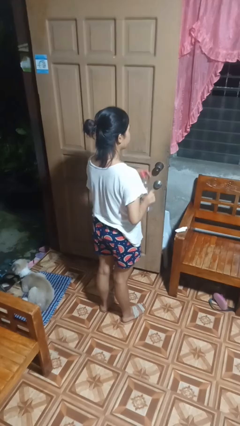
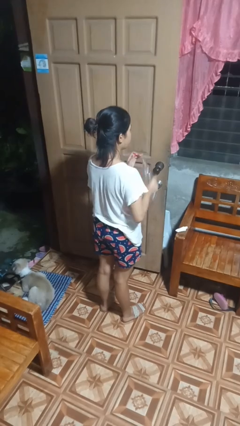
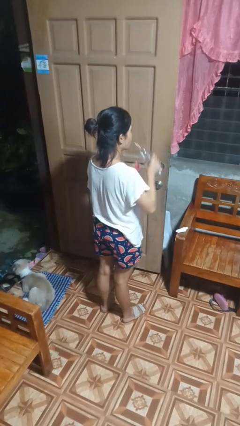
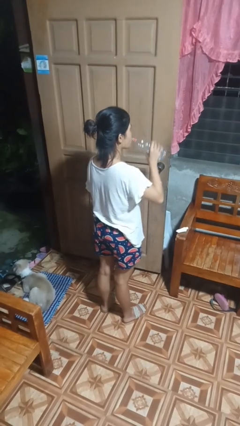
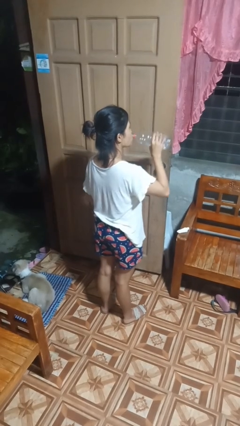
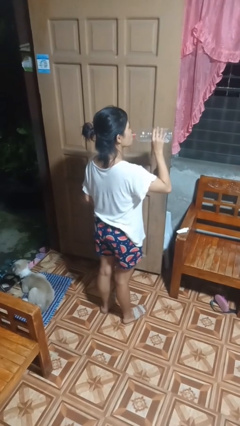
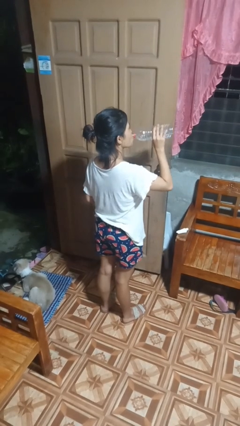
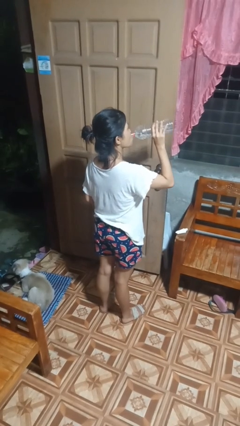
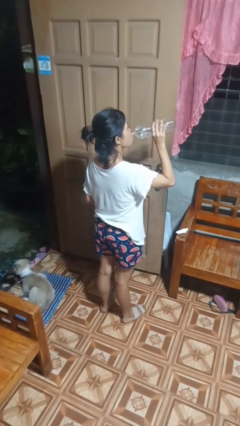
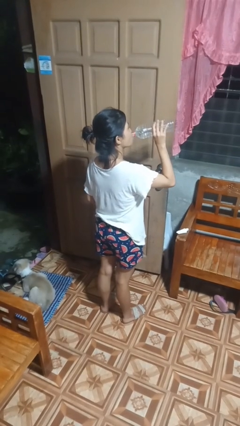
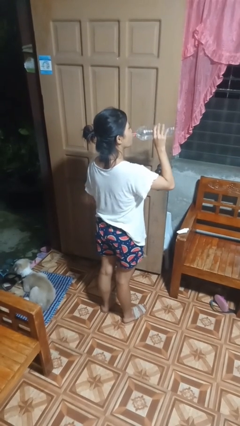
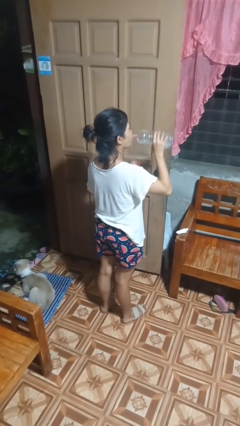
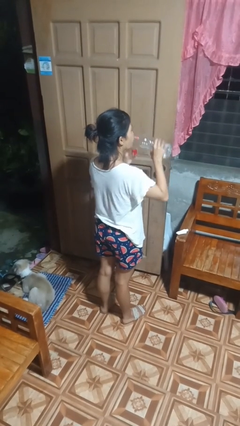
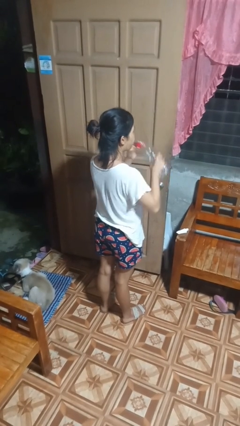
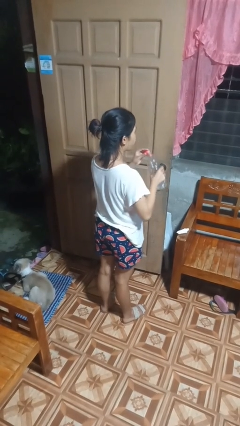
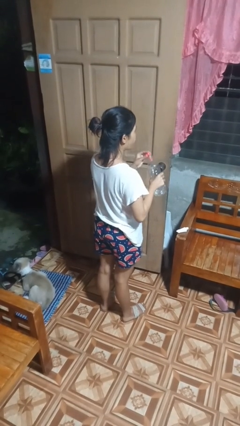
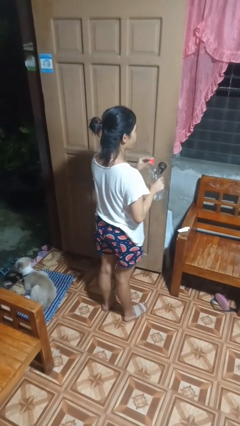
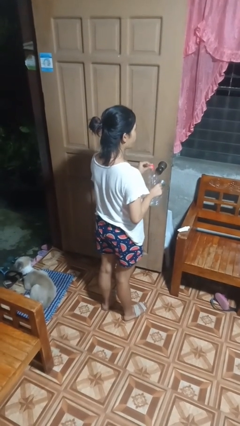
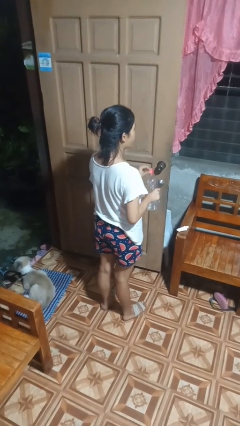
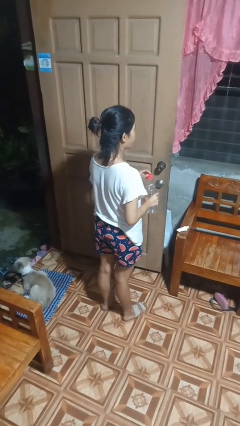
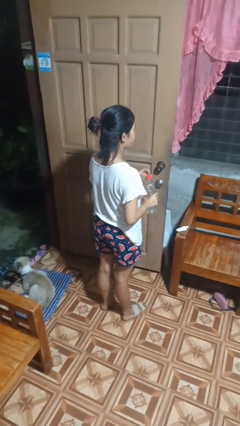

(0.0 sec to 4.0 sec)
person drinks from bottle

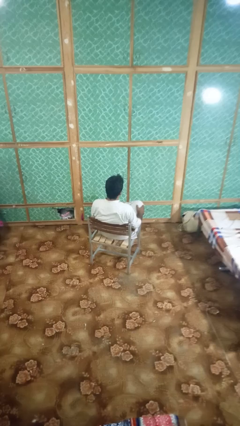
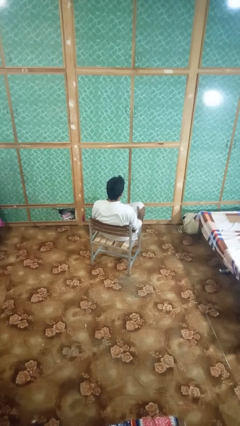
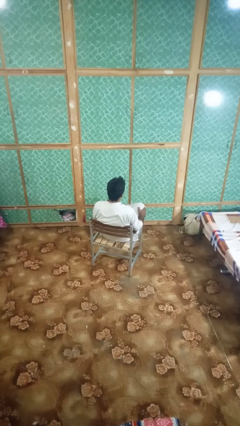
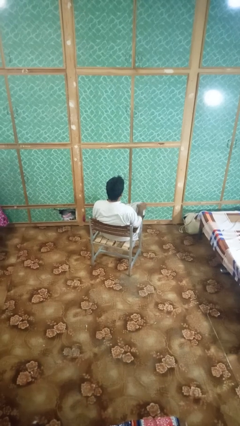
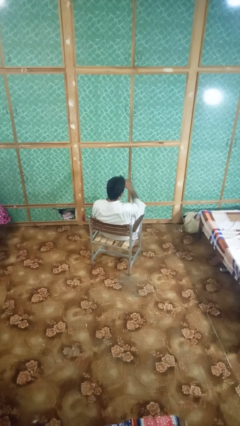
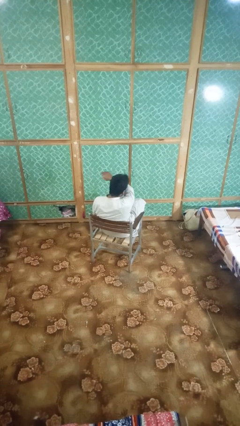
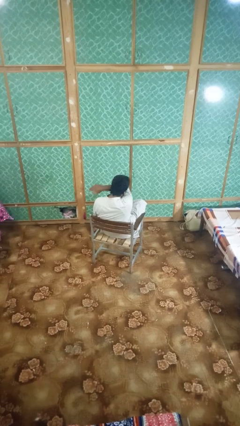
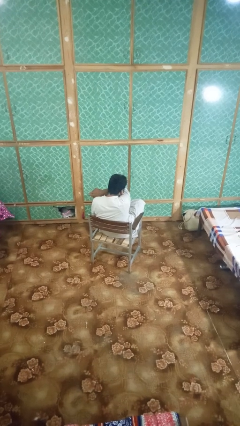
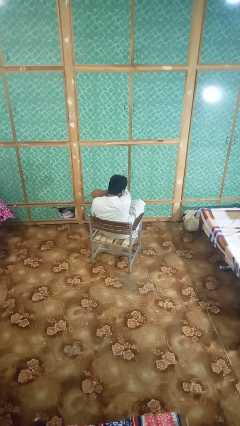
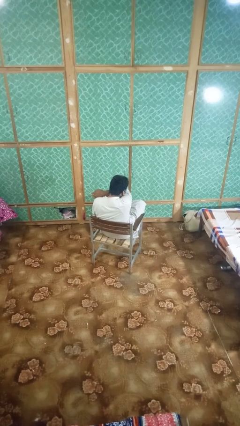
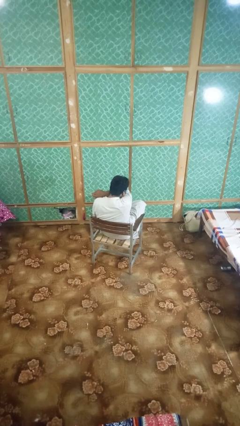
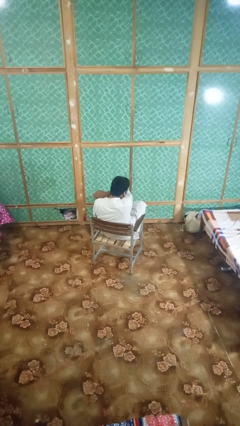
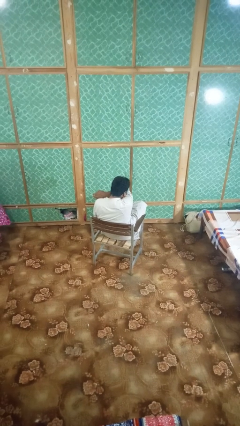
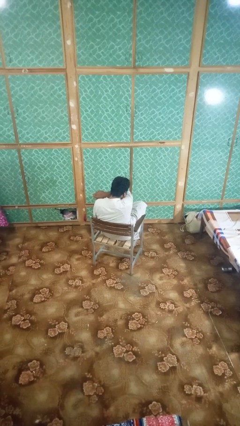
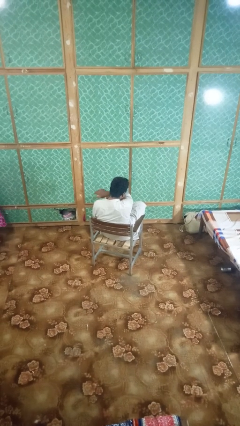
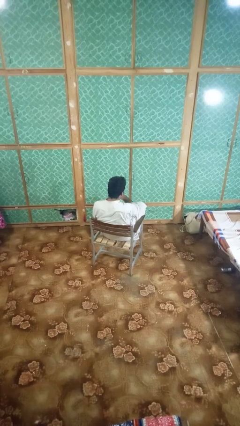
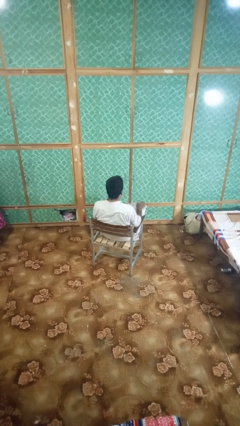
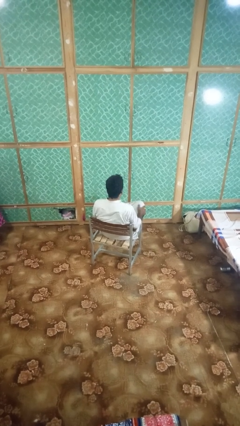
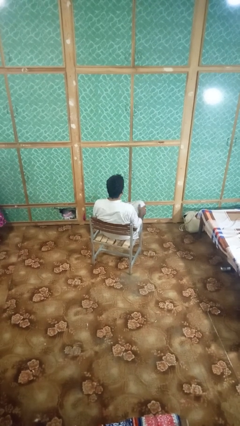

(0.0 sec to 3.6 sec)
person sneezes into arm

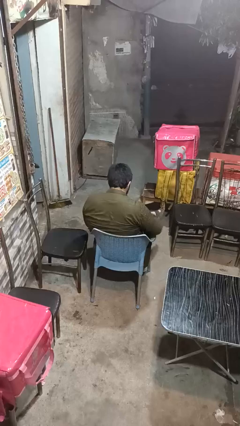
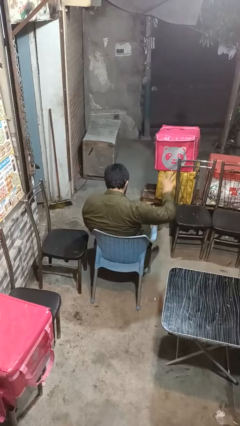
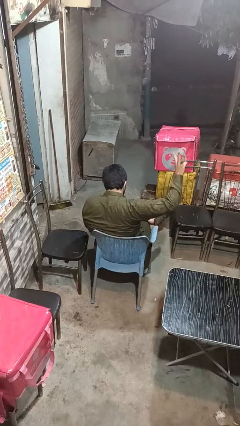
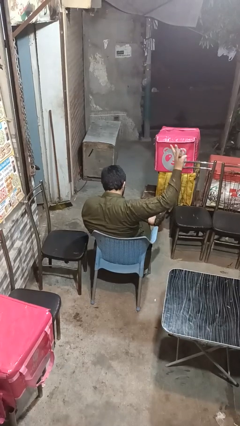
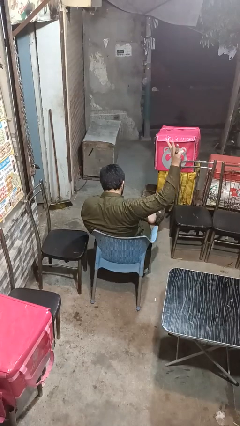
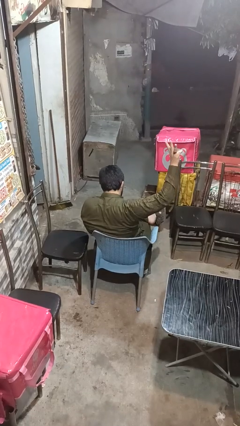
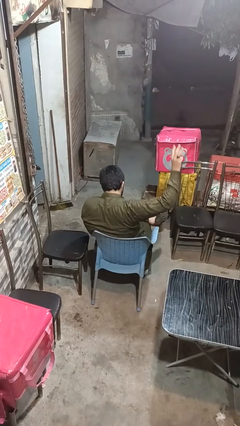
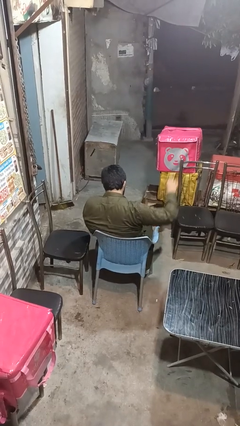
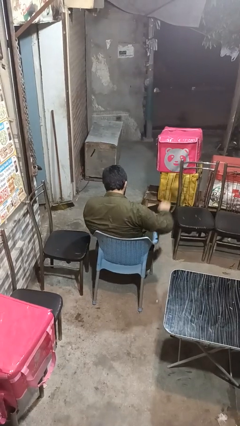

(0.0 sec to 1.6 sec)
person gestures number three

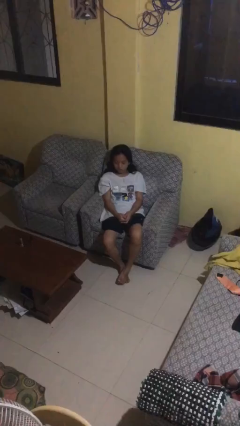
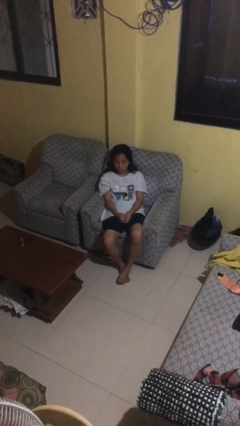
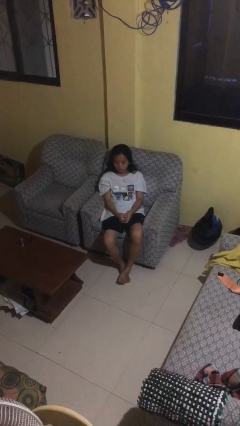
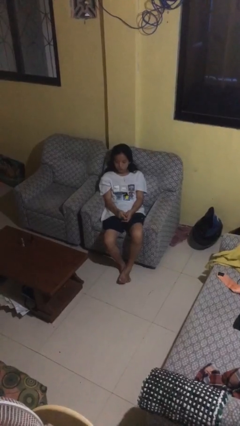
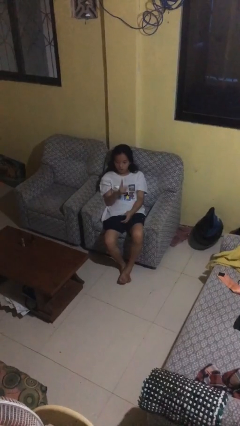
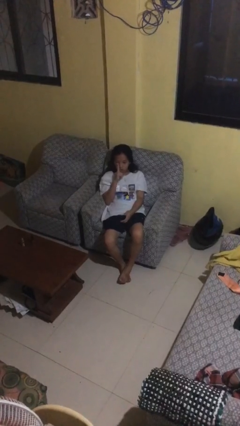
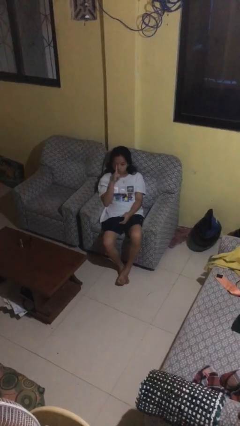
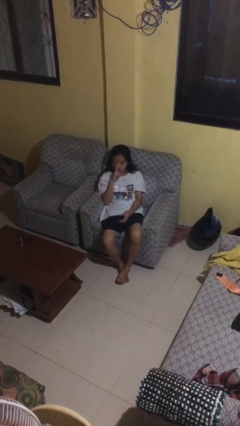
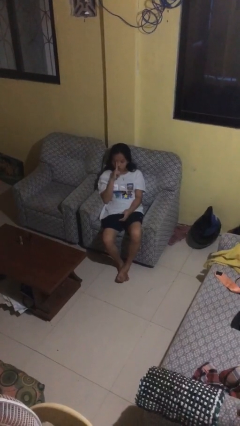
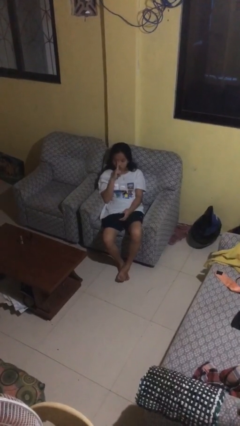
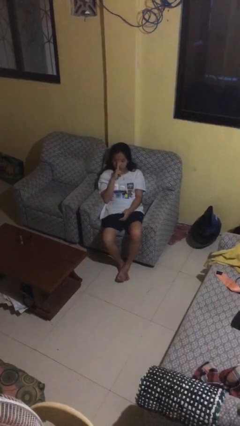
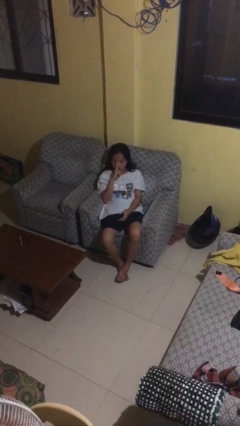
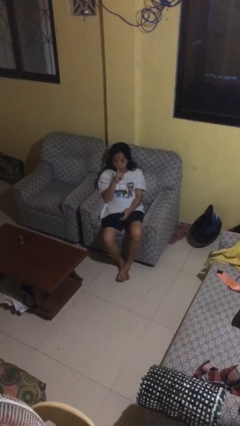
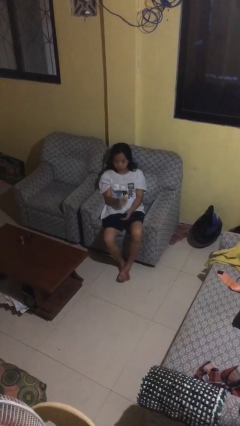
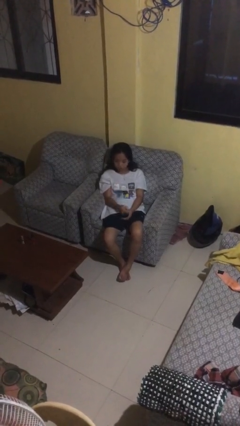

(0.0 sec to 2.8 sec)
person gestures be quiet

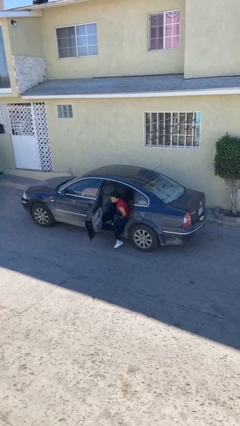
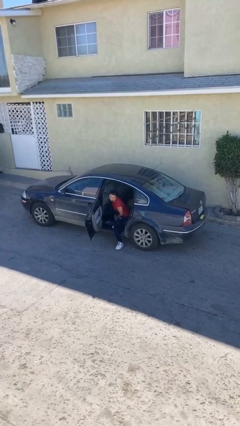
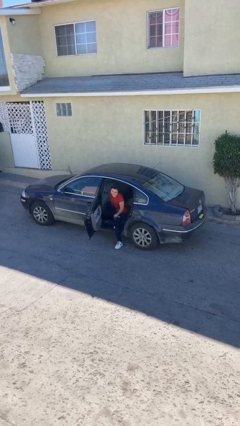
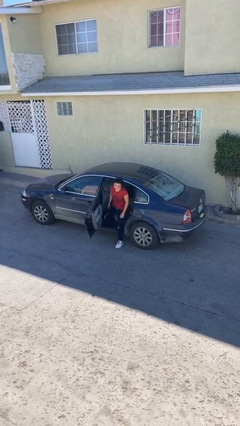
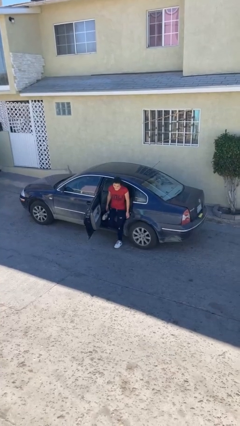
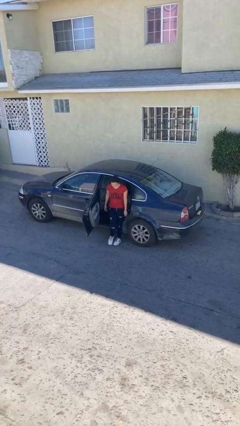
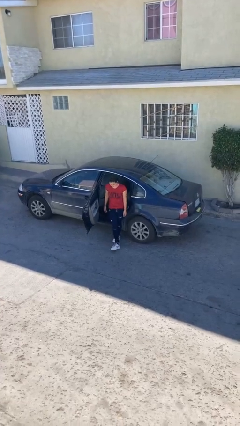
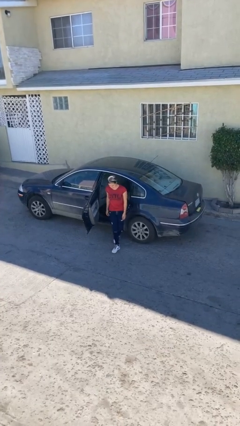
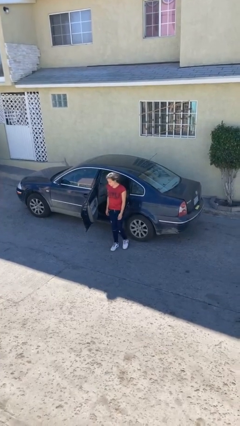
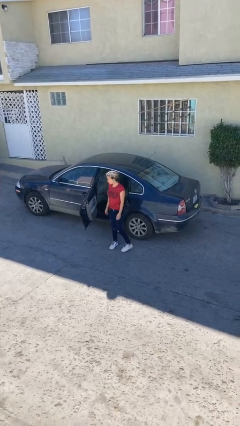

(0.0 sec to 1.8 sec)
person exits car

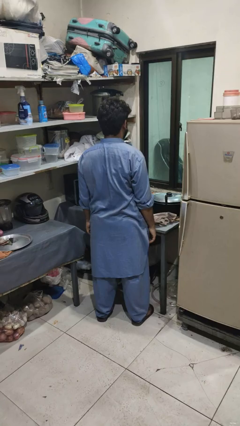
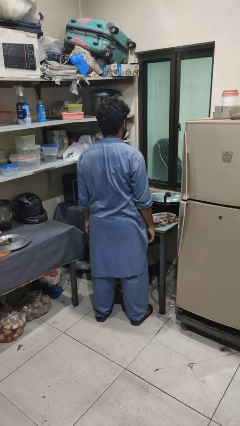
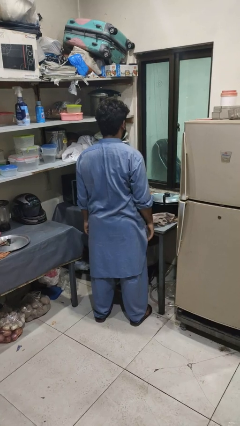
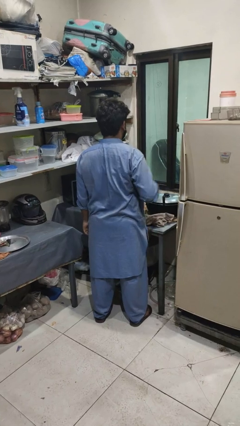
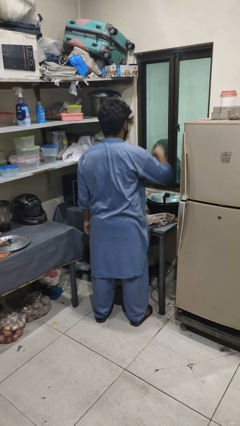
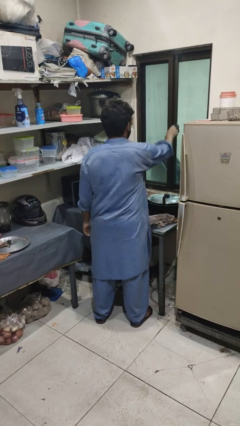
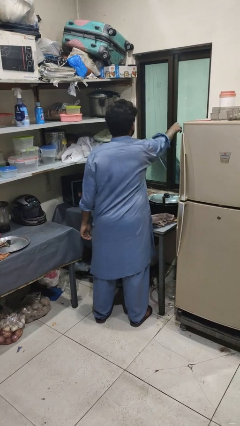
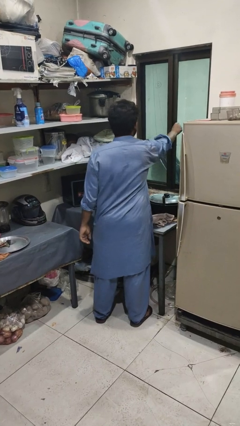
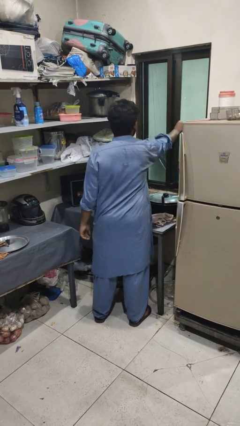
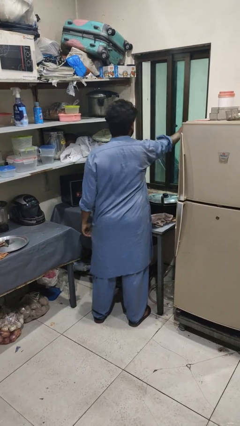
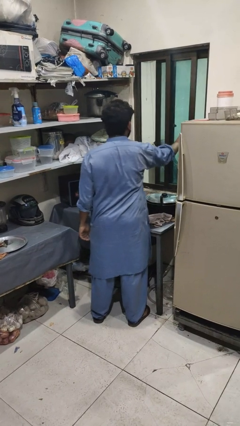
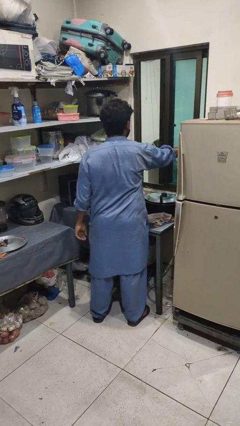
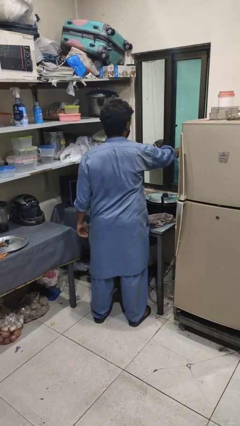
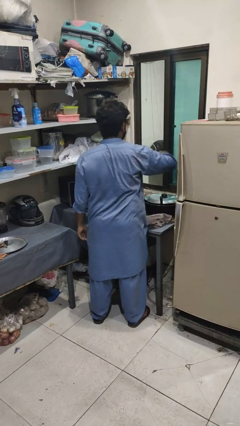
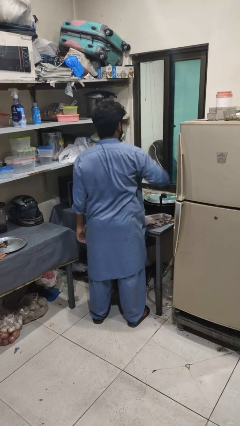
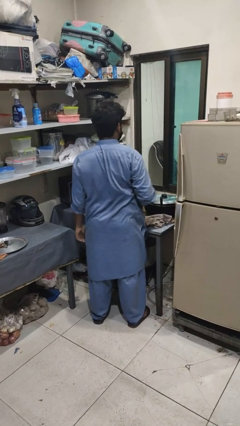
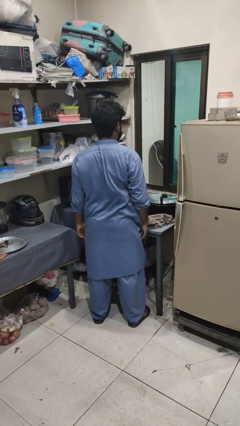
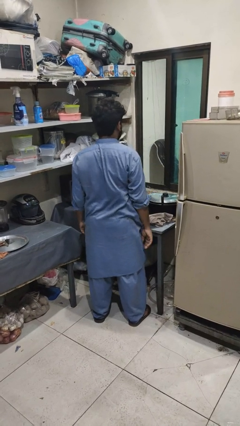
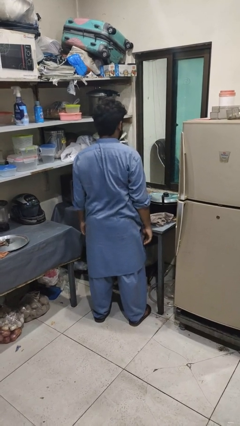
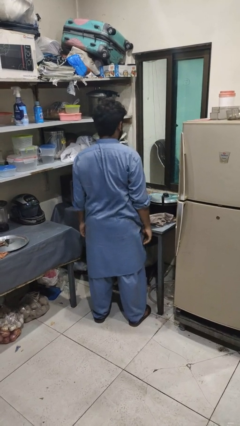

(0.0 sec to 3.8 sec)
person opens home window

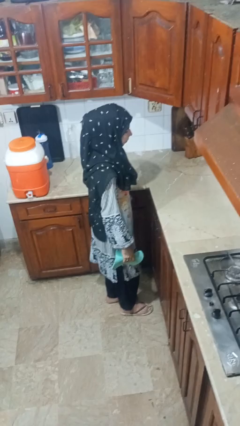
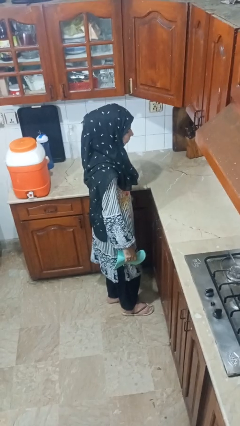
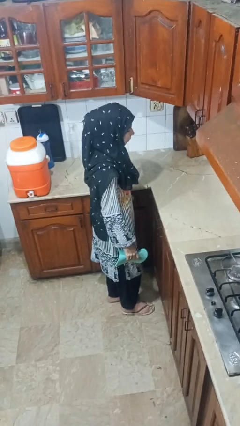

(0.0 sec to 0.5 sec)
person cleans table with rag
